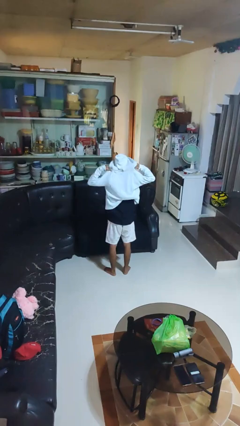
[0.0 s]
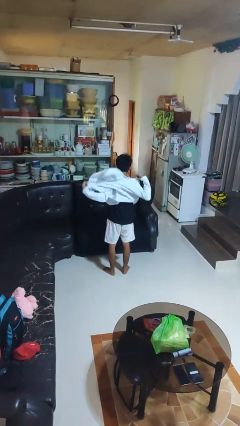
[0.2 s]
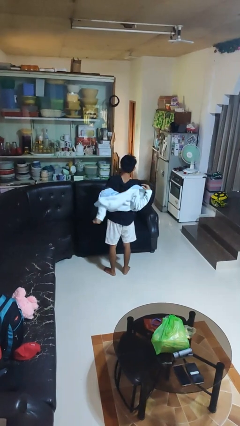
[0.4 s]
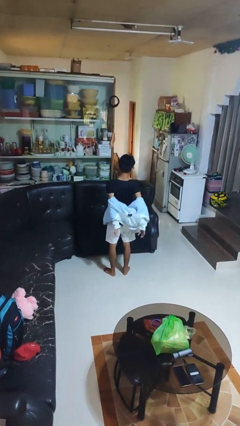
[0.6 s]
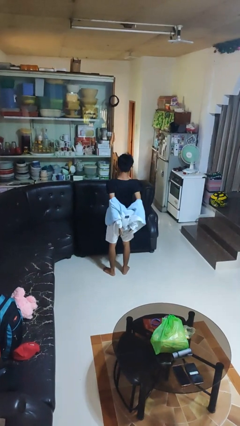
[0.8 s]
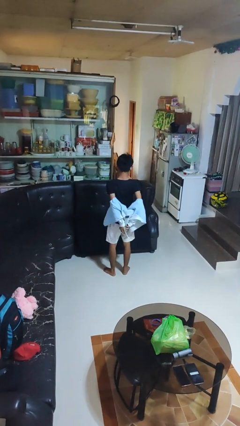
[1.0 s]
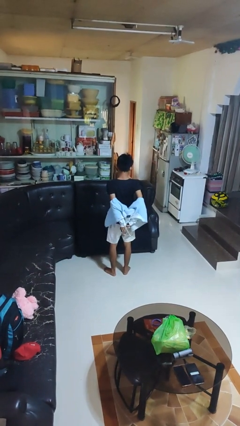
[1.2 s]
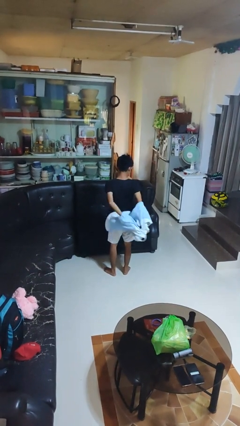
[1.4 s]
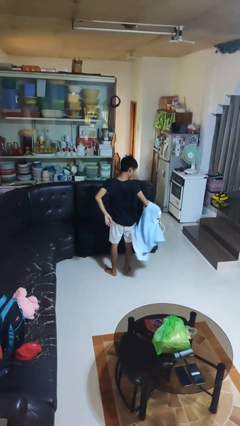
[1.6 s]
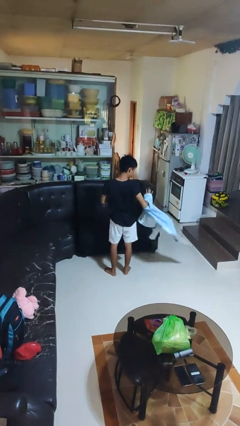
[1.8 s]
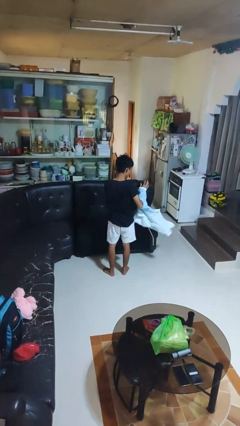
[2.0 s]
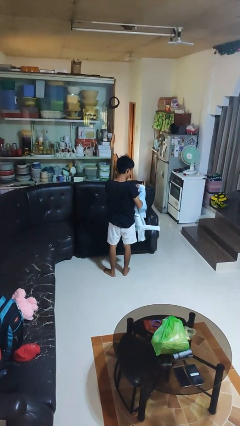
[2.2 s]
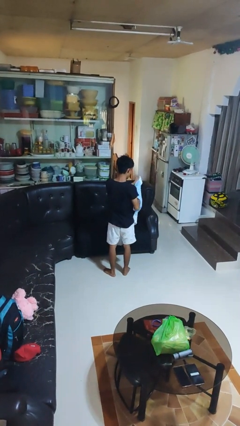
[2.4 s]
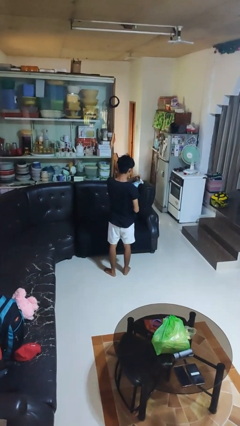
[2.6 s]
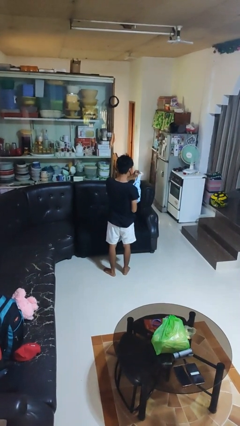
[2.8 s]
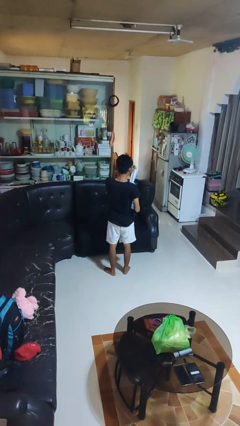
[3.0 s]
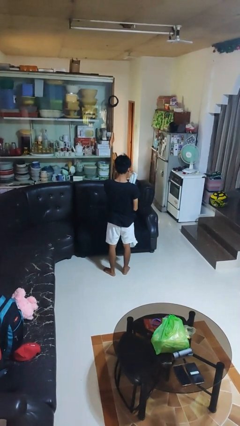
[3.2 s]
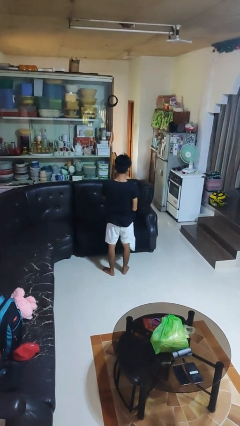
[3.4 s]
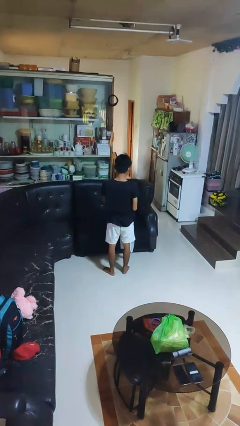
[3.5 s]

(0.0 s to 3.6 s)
person takes off hoodie

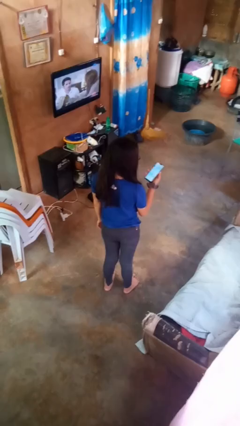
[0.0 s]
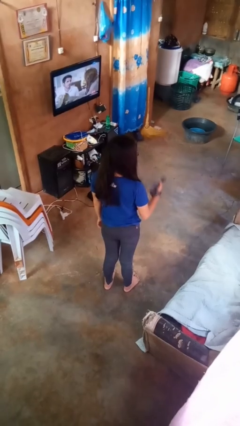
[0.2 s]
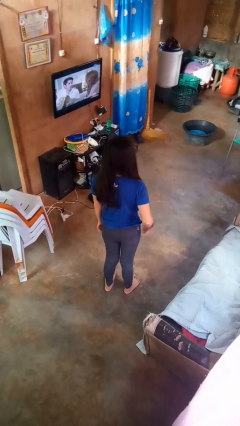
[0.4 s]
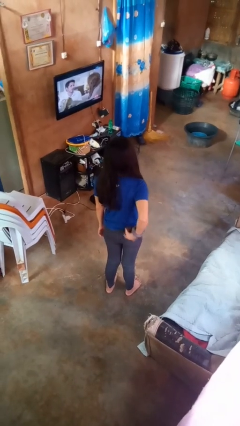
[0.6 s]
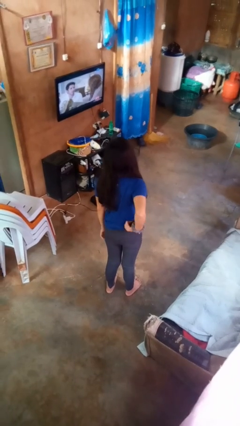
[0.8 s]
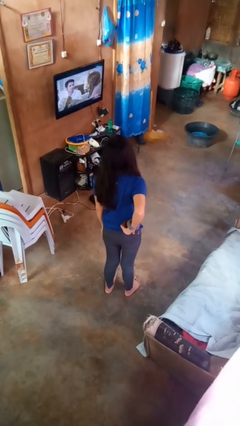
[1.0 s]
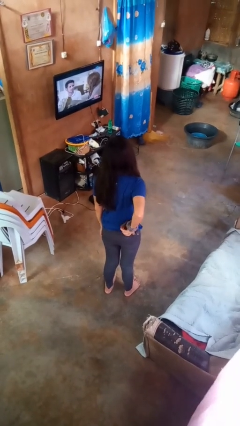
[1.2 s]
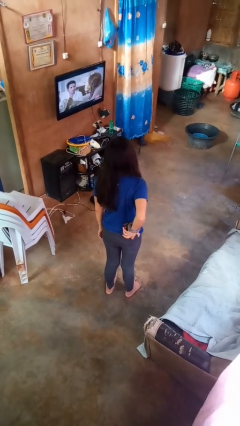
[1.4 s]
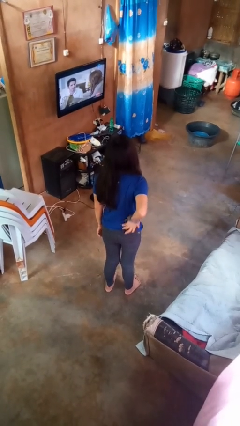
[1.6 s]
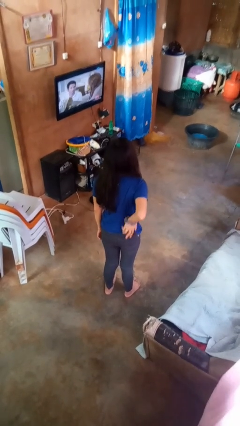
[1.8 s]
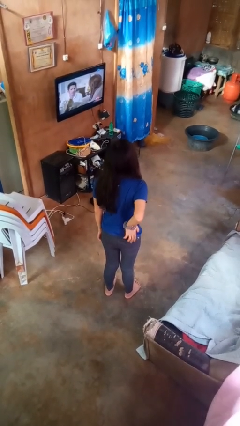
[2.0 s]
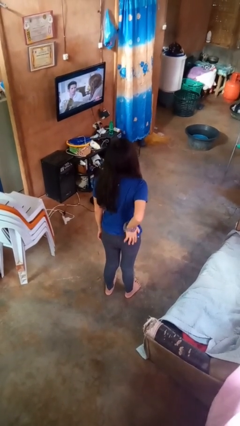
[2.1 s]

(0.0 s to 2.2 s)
person puts phone into pocket

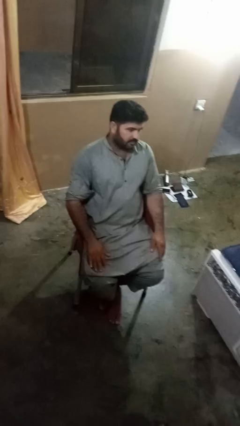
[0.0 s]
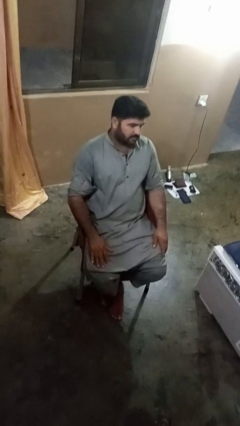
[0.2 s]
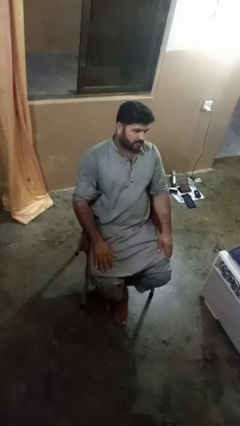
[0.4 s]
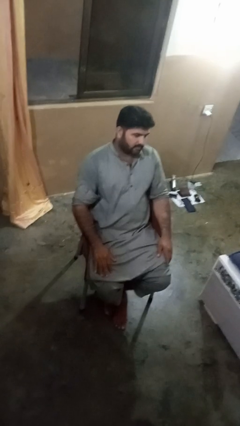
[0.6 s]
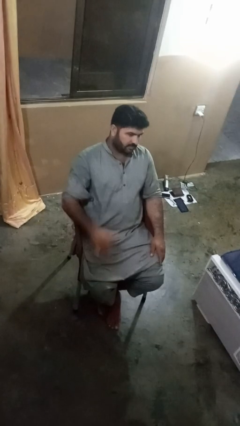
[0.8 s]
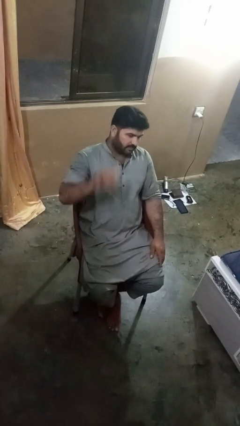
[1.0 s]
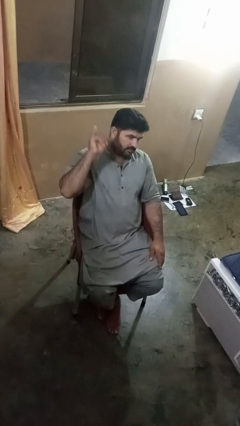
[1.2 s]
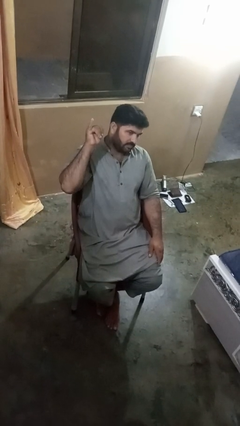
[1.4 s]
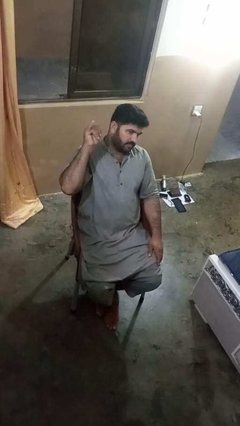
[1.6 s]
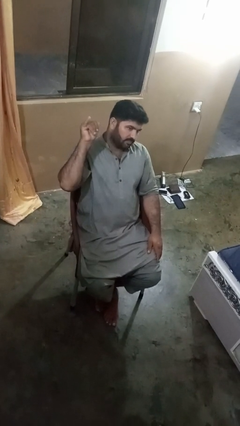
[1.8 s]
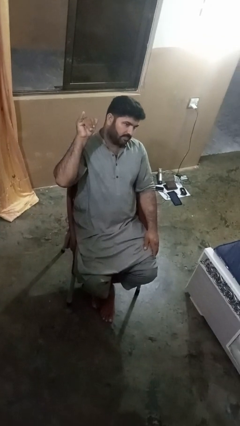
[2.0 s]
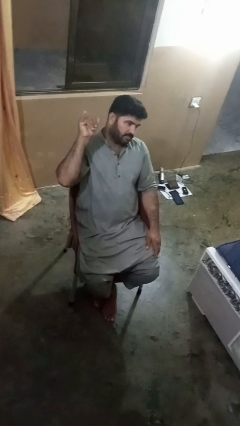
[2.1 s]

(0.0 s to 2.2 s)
person gestures hang loose

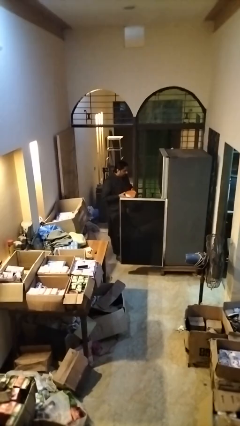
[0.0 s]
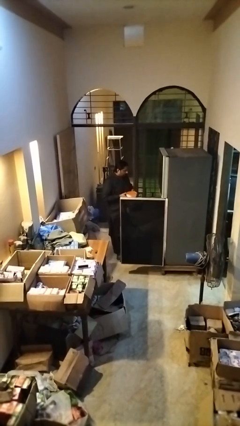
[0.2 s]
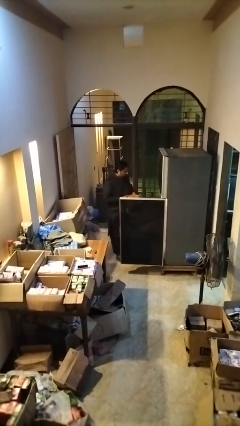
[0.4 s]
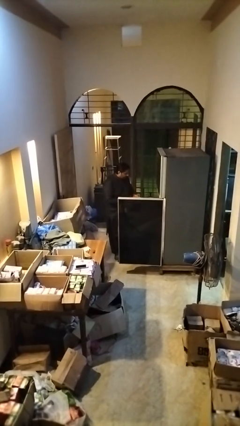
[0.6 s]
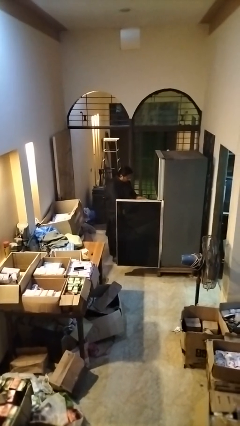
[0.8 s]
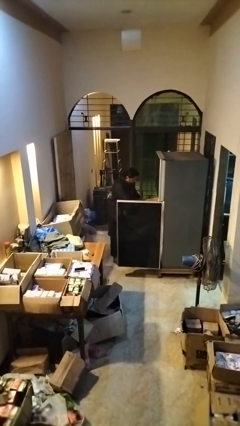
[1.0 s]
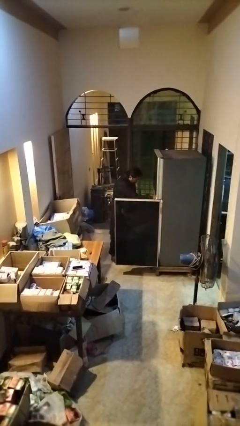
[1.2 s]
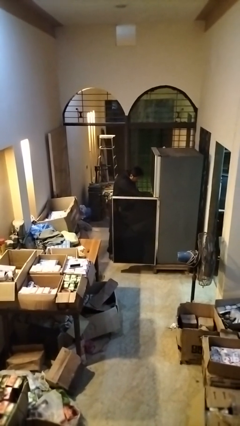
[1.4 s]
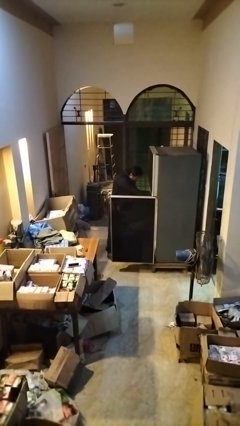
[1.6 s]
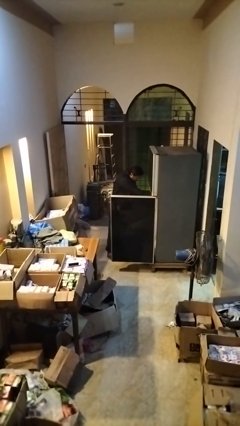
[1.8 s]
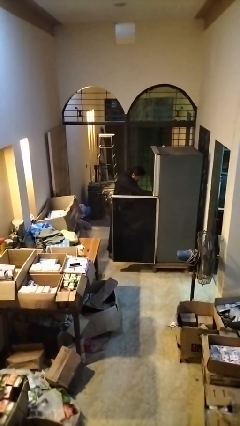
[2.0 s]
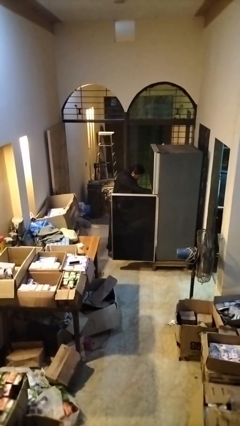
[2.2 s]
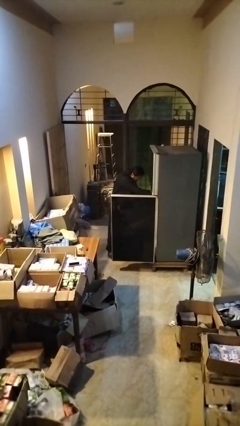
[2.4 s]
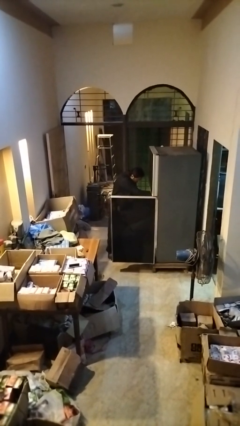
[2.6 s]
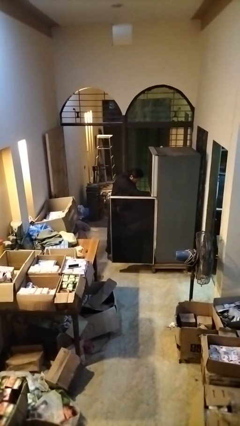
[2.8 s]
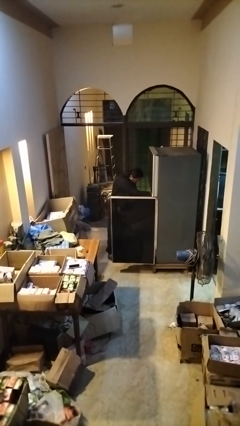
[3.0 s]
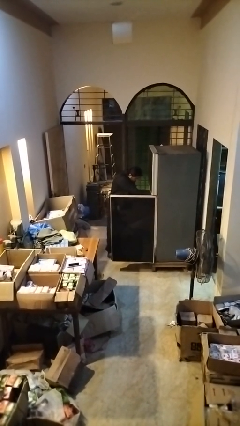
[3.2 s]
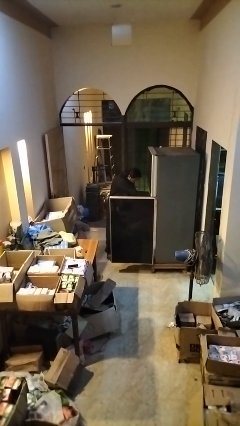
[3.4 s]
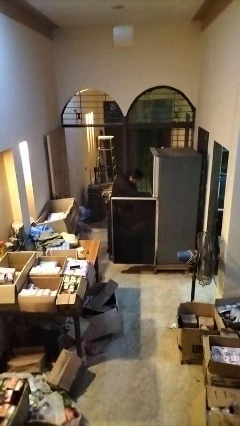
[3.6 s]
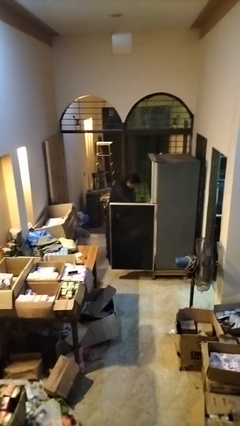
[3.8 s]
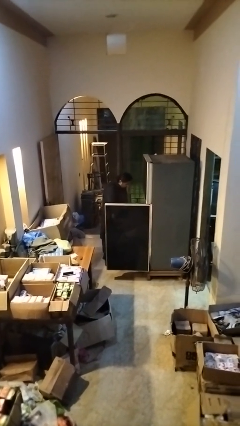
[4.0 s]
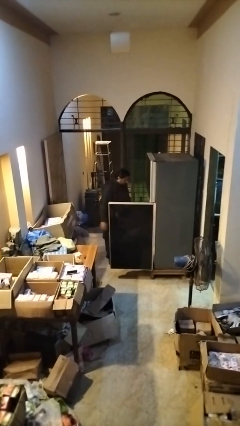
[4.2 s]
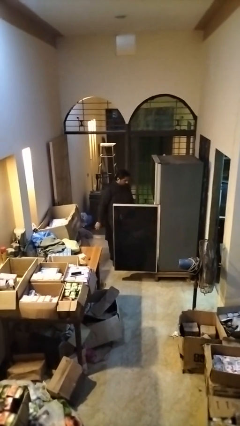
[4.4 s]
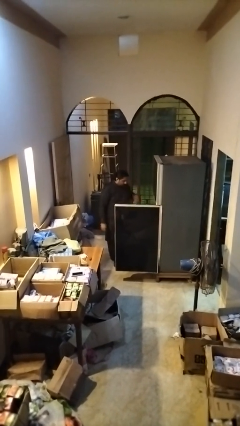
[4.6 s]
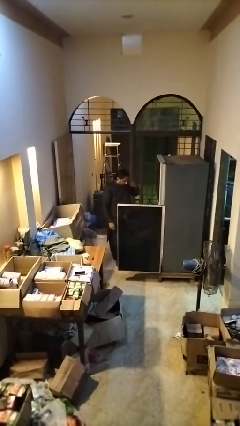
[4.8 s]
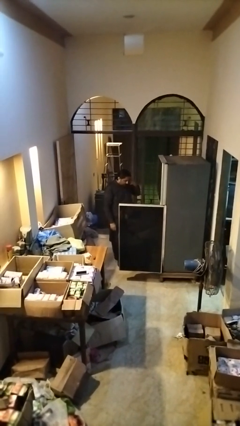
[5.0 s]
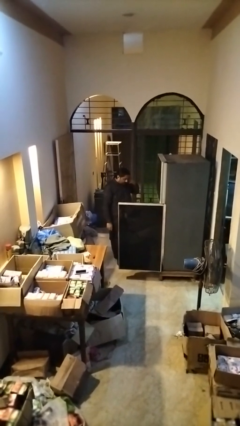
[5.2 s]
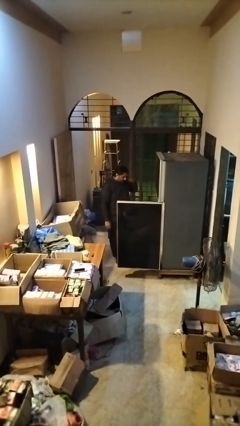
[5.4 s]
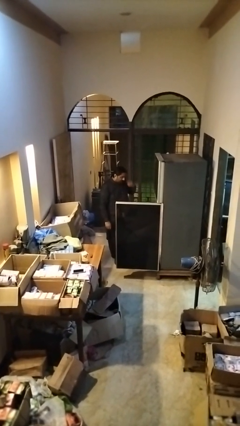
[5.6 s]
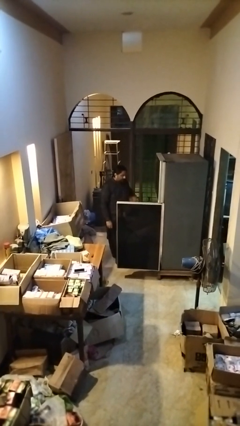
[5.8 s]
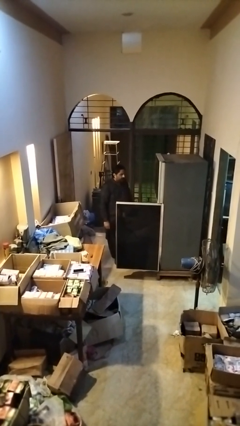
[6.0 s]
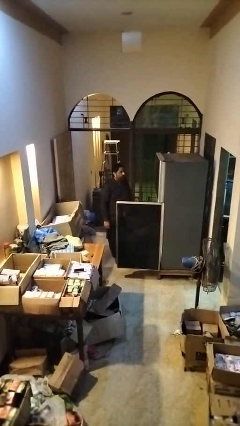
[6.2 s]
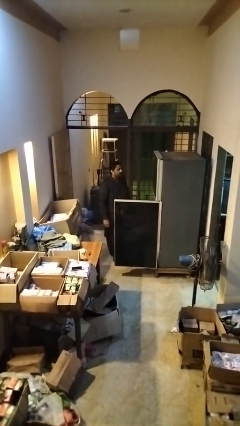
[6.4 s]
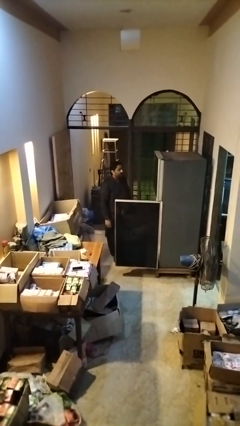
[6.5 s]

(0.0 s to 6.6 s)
person takes object from refrigerator

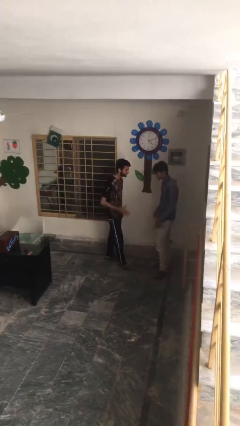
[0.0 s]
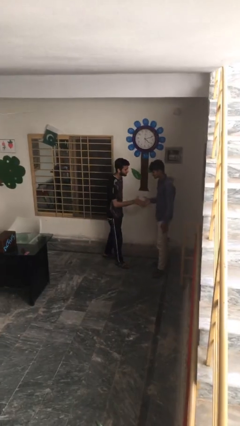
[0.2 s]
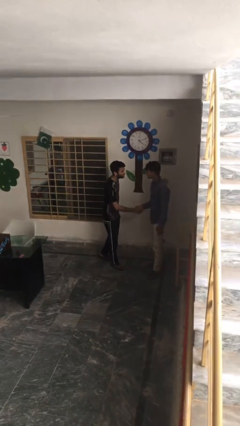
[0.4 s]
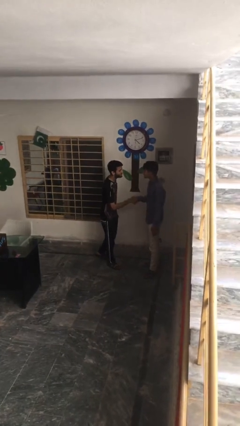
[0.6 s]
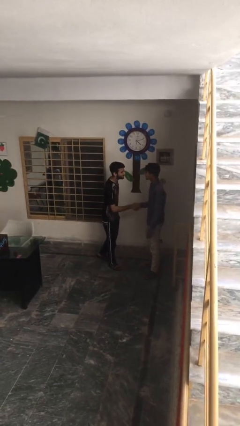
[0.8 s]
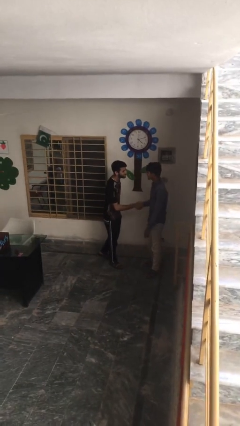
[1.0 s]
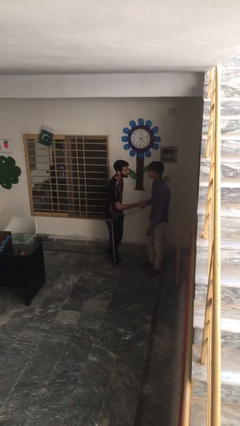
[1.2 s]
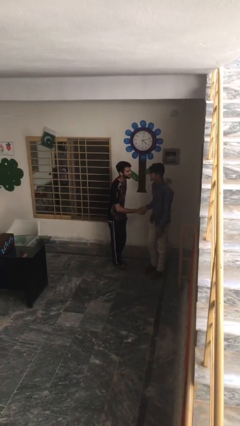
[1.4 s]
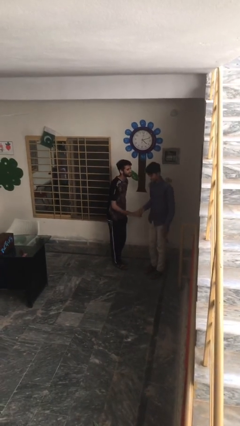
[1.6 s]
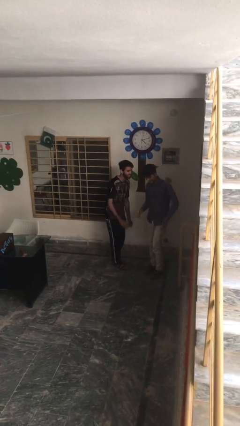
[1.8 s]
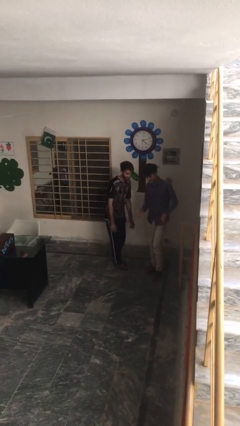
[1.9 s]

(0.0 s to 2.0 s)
person shakes hand

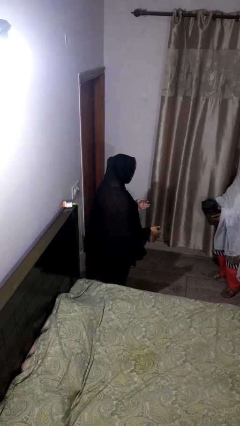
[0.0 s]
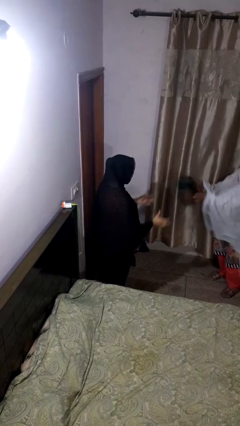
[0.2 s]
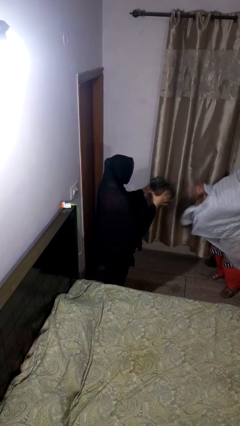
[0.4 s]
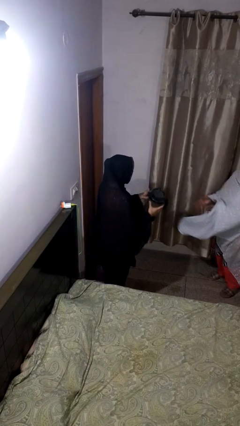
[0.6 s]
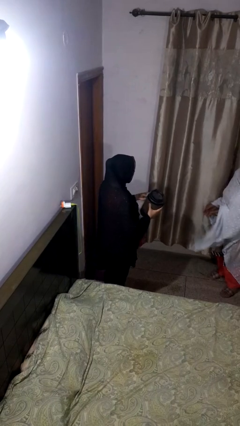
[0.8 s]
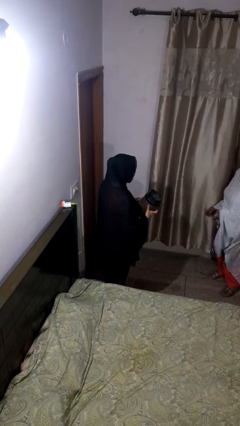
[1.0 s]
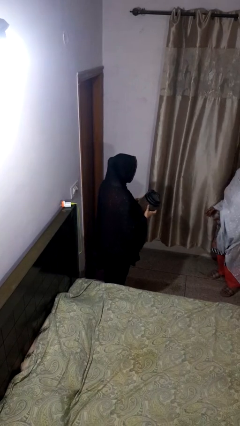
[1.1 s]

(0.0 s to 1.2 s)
person catches object from person
